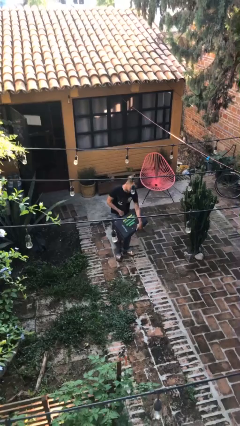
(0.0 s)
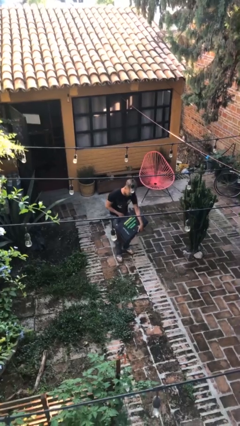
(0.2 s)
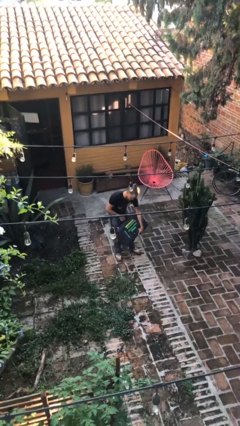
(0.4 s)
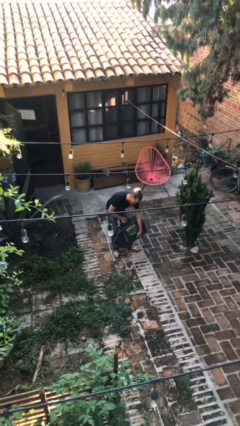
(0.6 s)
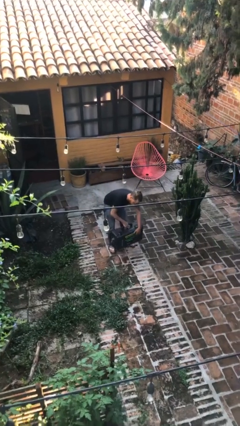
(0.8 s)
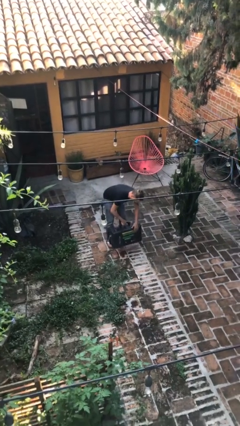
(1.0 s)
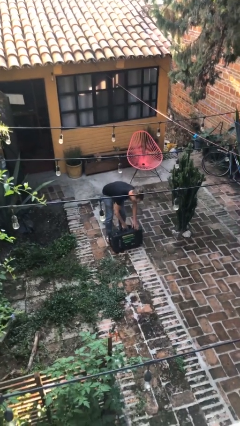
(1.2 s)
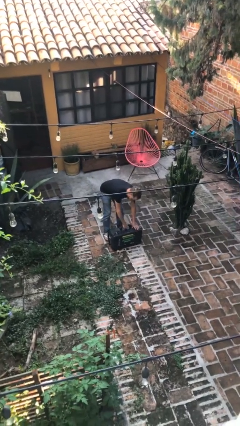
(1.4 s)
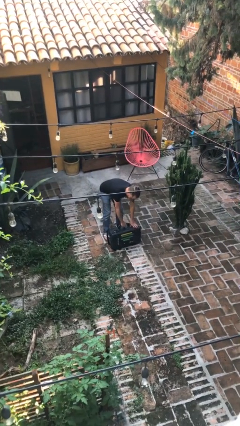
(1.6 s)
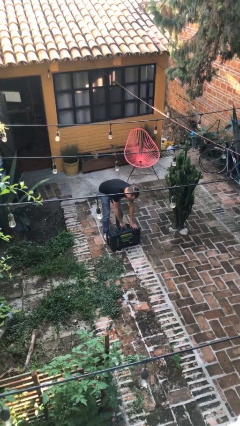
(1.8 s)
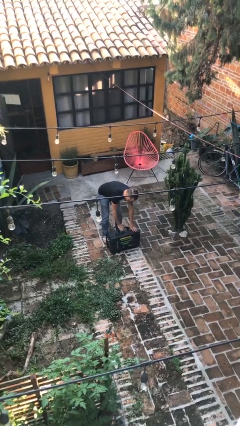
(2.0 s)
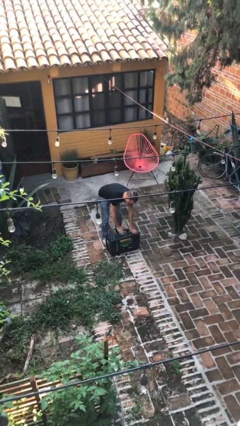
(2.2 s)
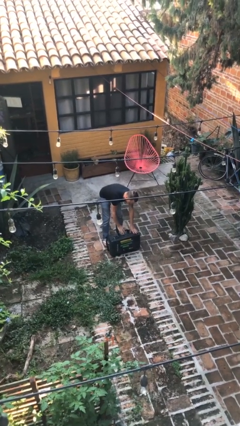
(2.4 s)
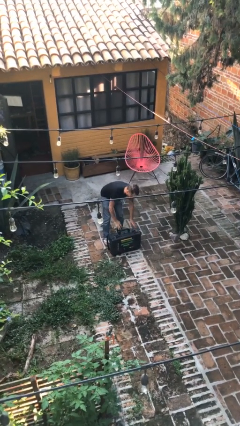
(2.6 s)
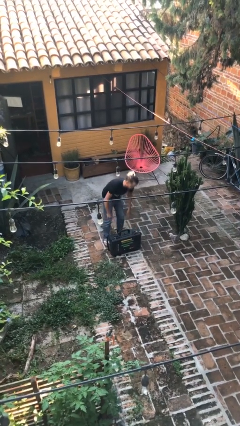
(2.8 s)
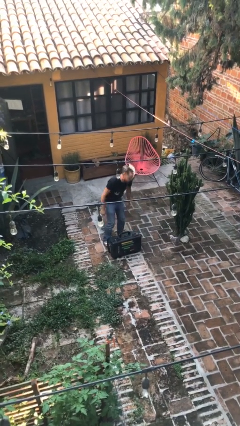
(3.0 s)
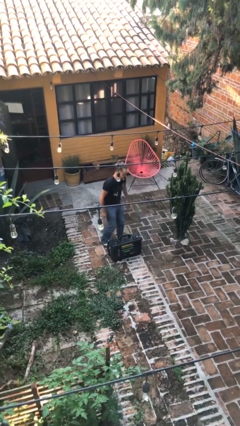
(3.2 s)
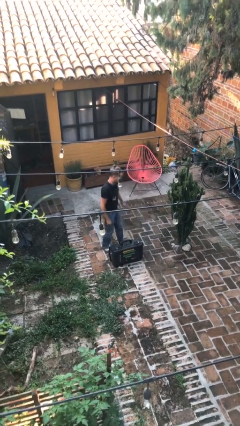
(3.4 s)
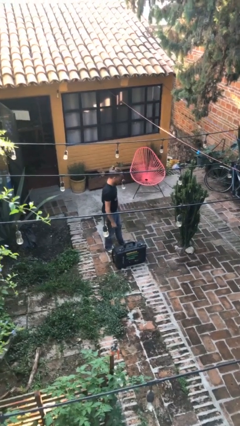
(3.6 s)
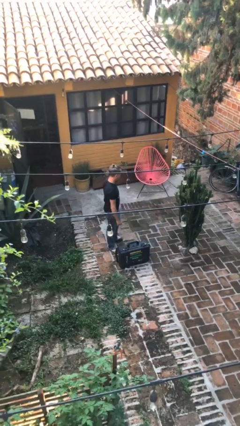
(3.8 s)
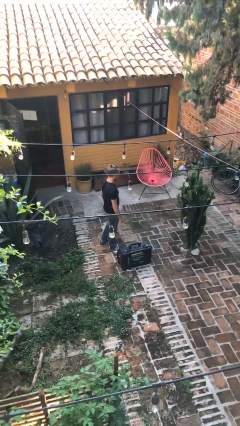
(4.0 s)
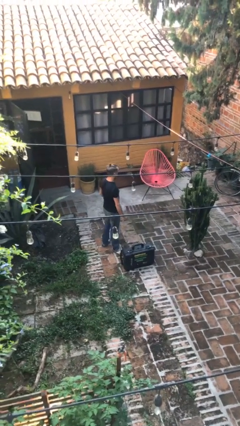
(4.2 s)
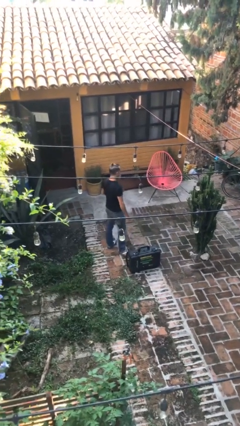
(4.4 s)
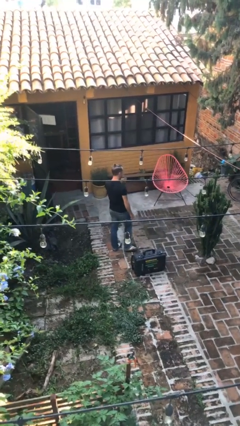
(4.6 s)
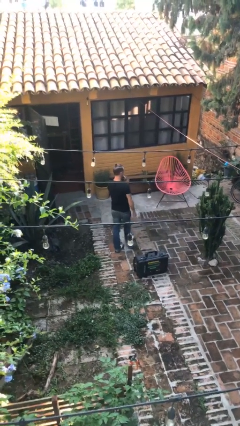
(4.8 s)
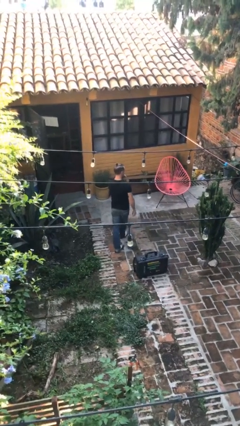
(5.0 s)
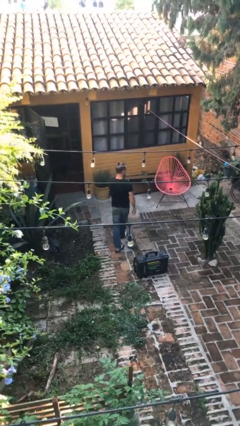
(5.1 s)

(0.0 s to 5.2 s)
person puts down object on floor

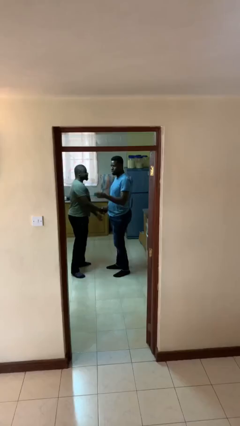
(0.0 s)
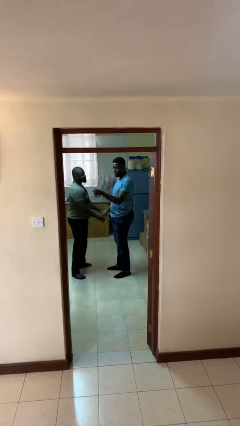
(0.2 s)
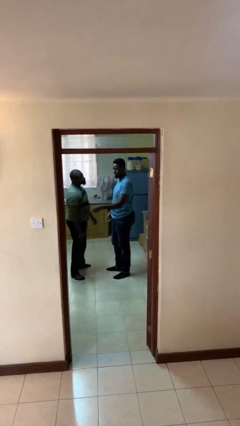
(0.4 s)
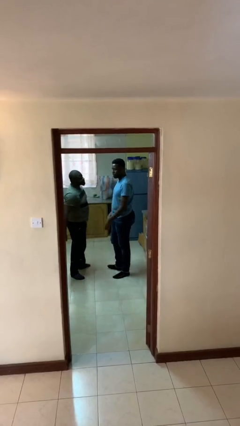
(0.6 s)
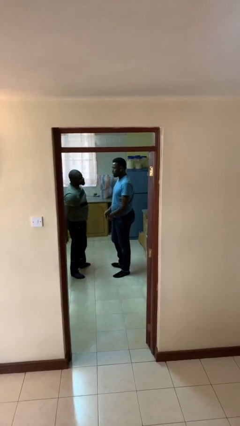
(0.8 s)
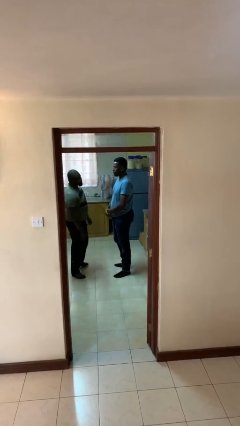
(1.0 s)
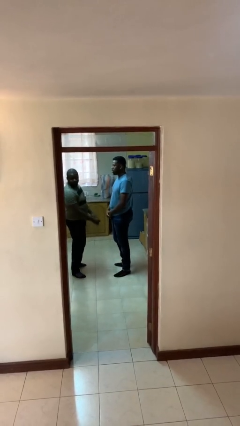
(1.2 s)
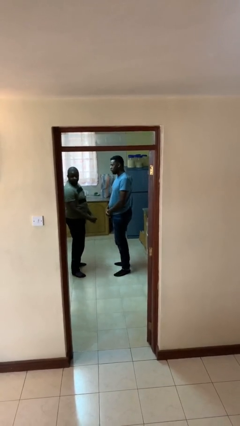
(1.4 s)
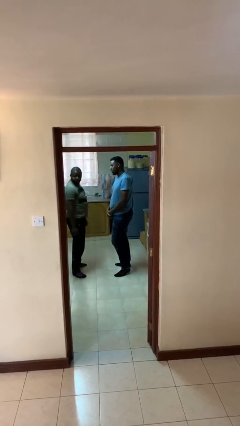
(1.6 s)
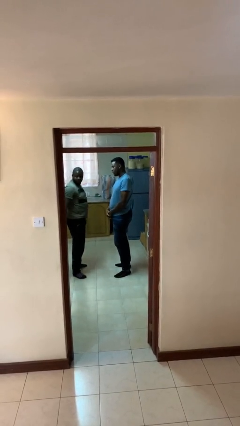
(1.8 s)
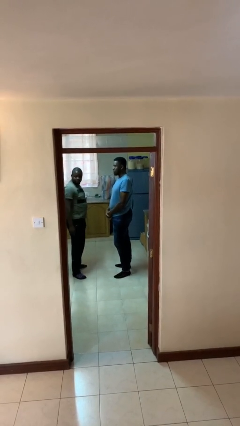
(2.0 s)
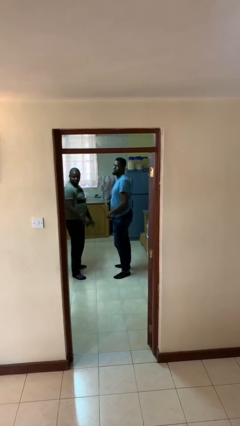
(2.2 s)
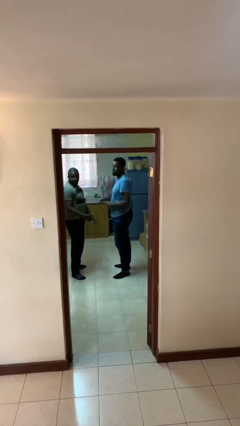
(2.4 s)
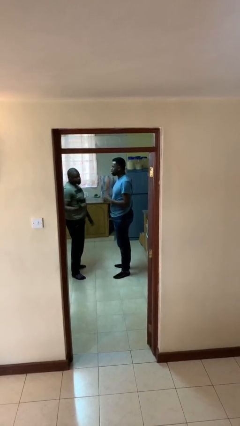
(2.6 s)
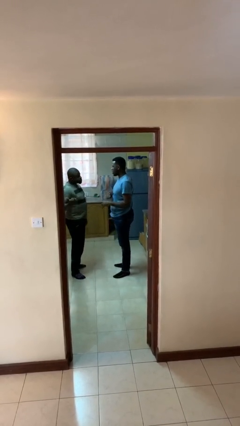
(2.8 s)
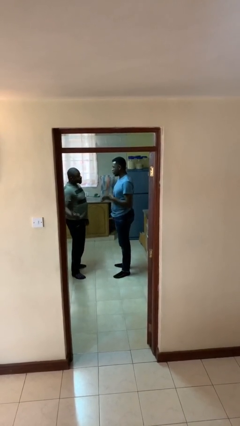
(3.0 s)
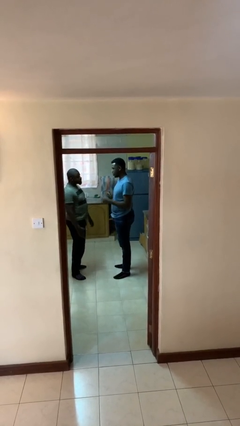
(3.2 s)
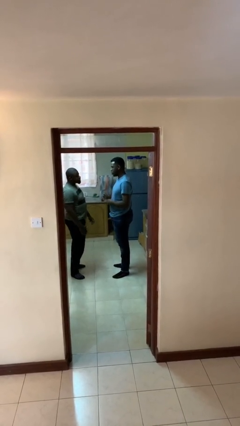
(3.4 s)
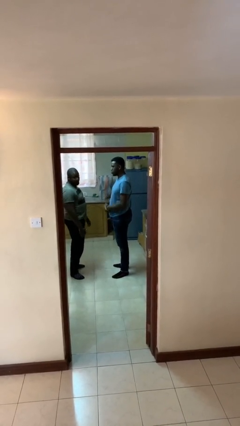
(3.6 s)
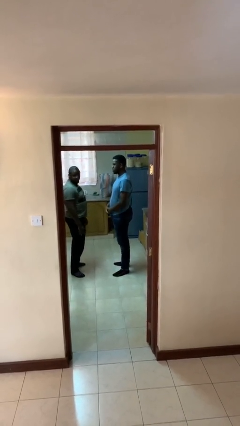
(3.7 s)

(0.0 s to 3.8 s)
person talks to person

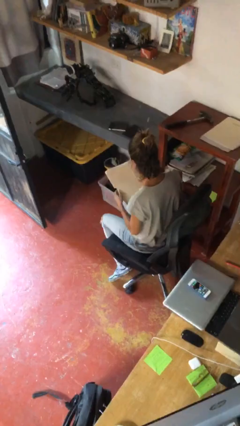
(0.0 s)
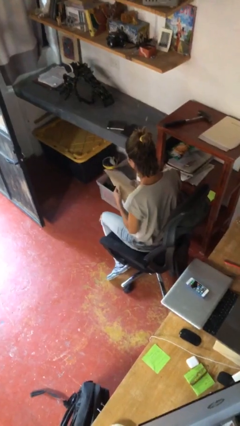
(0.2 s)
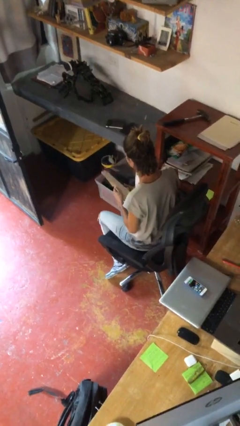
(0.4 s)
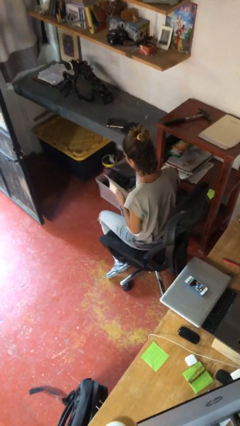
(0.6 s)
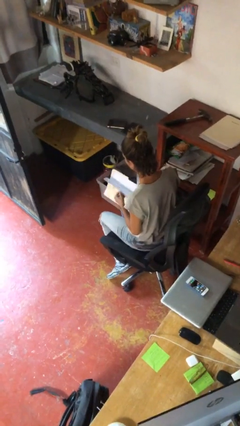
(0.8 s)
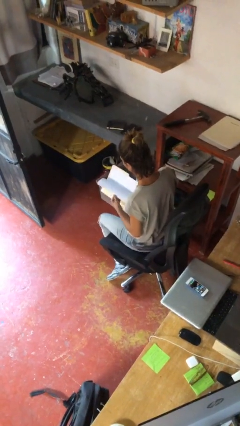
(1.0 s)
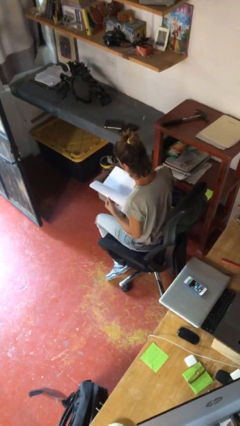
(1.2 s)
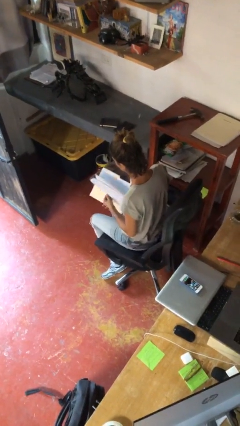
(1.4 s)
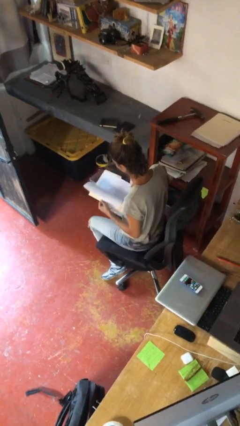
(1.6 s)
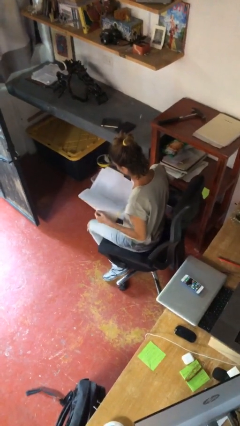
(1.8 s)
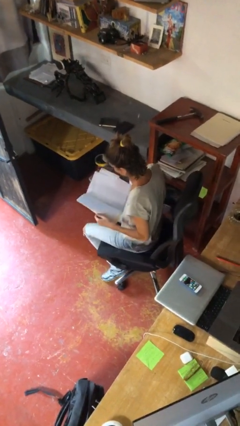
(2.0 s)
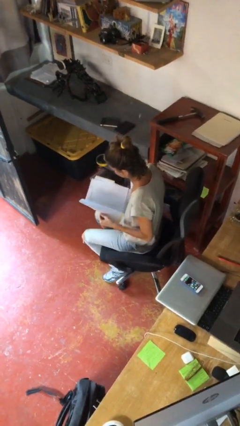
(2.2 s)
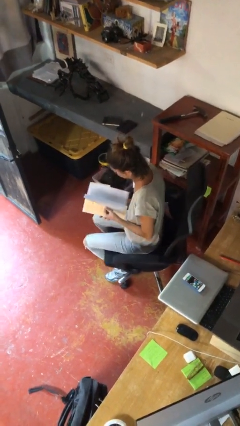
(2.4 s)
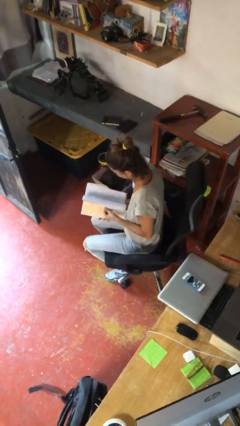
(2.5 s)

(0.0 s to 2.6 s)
person reads document

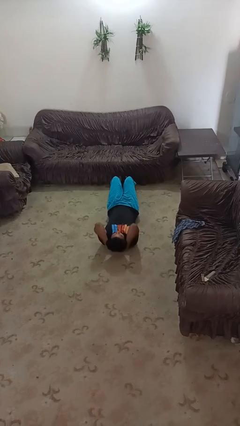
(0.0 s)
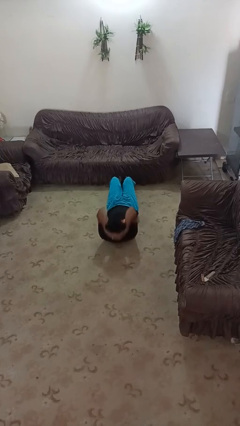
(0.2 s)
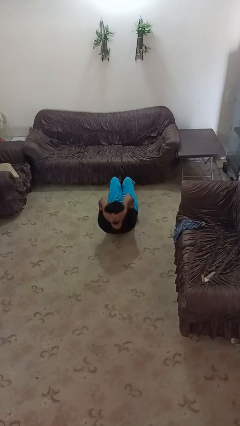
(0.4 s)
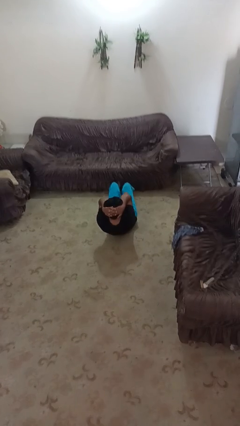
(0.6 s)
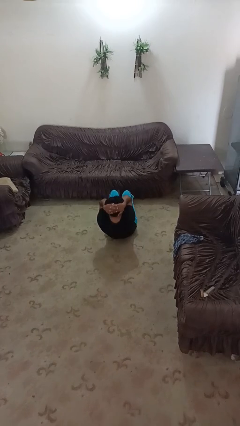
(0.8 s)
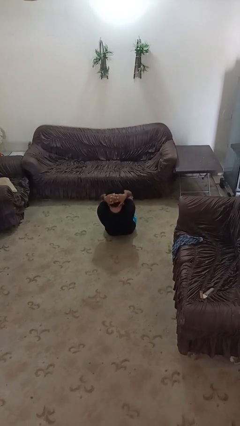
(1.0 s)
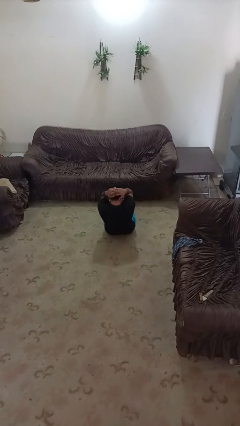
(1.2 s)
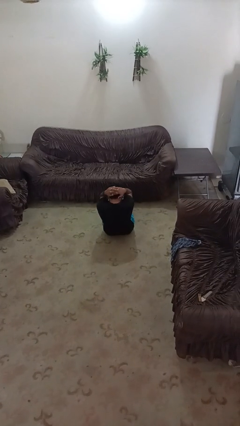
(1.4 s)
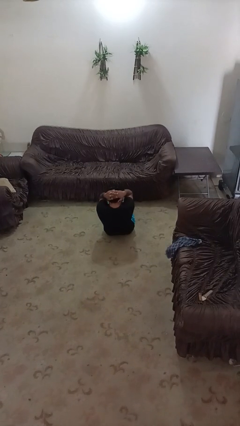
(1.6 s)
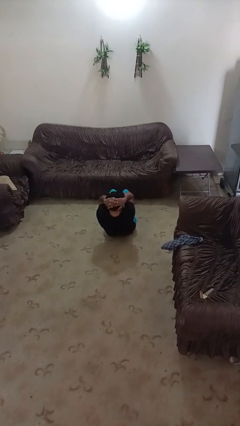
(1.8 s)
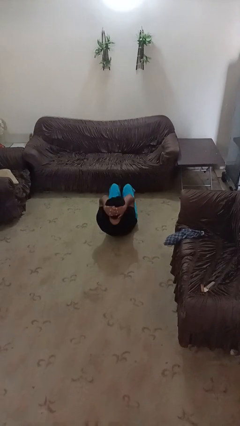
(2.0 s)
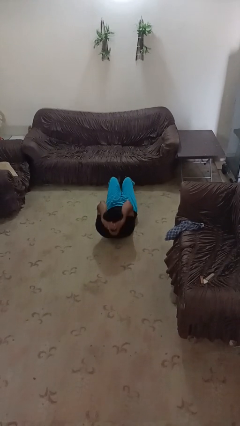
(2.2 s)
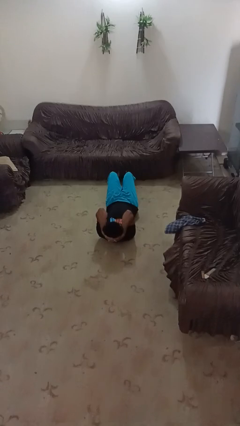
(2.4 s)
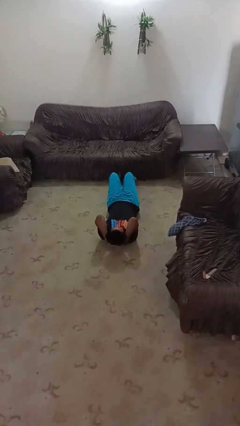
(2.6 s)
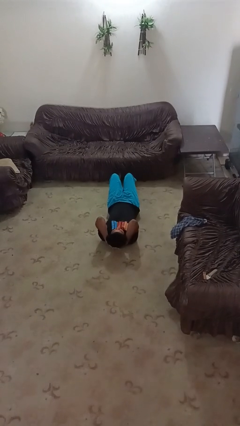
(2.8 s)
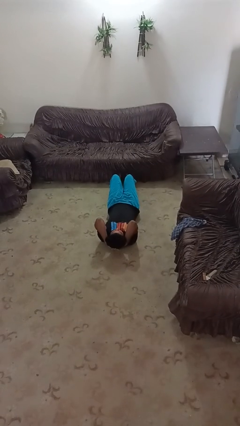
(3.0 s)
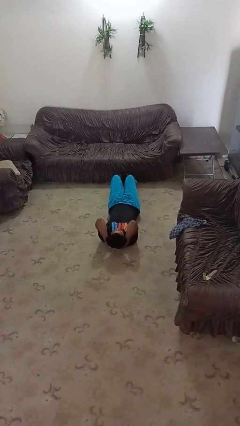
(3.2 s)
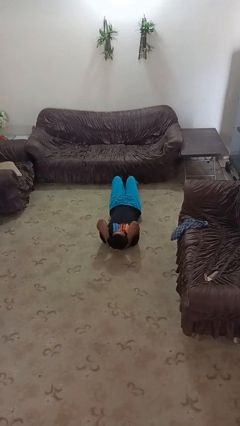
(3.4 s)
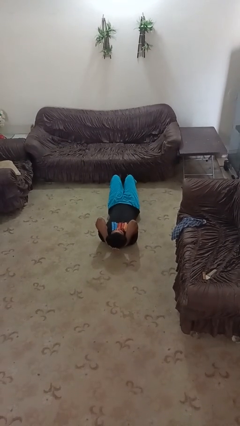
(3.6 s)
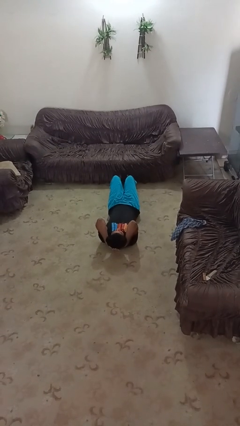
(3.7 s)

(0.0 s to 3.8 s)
person exercises with situp

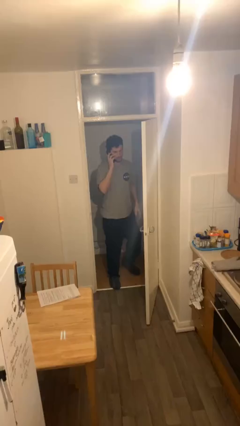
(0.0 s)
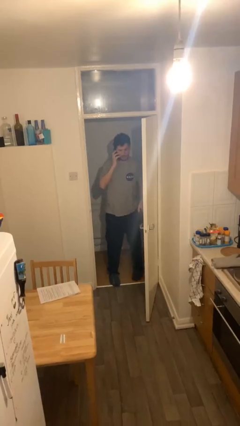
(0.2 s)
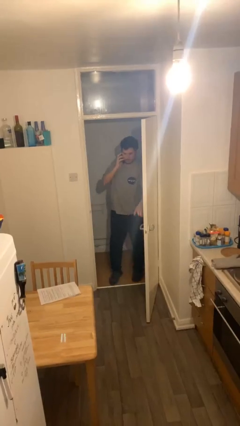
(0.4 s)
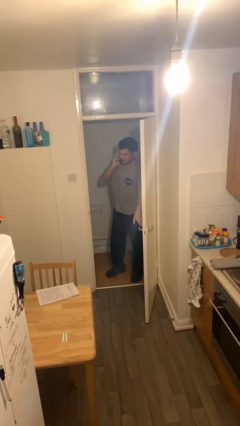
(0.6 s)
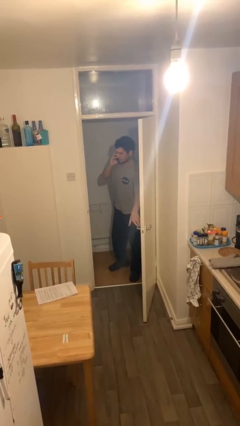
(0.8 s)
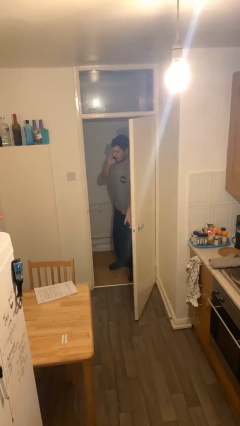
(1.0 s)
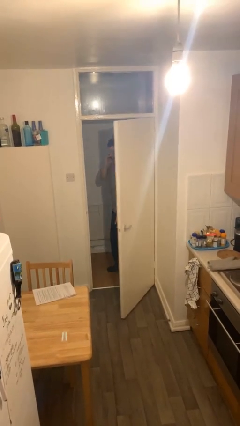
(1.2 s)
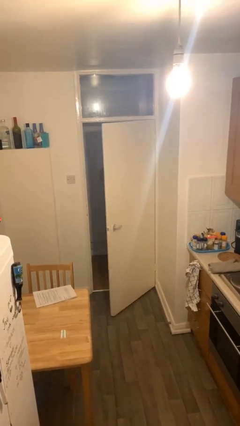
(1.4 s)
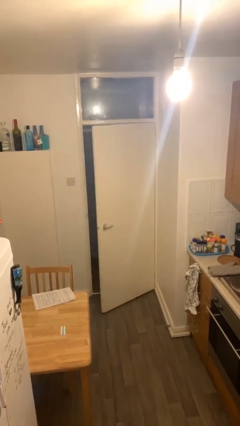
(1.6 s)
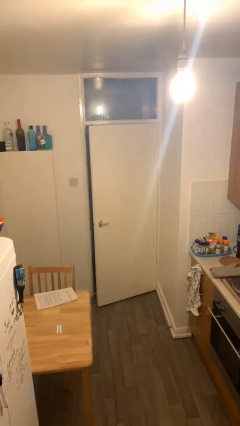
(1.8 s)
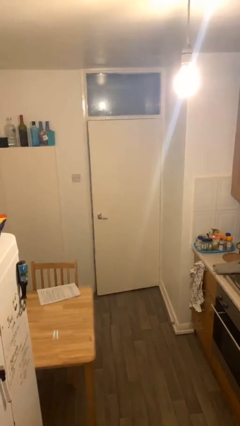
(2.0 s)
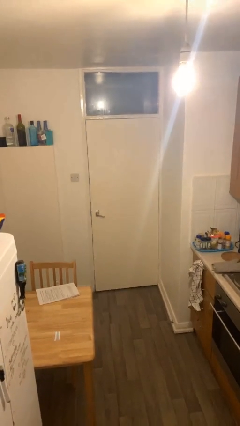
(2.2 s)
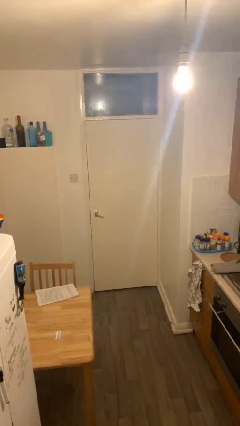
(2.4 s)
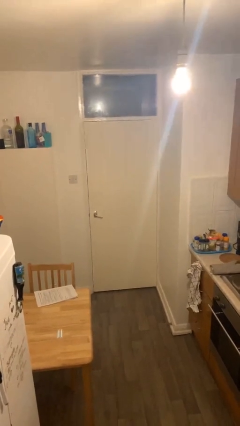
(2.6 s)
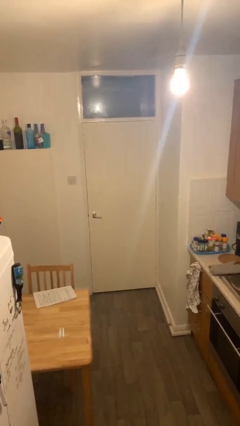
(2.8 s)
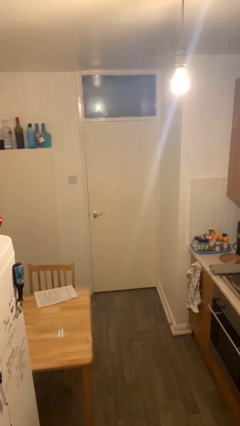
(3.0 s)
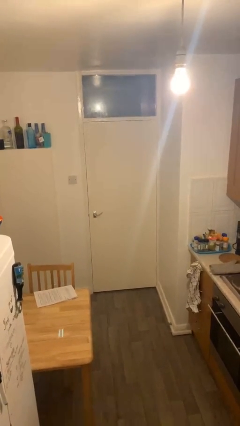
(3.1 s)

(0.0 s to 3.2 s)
person closes facility door
